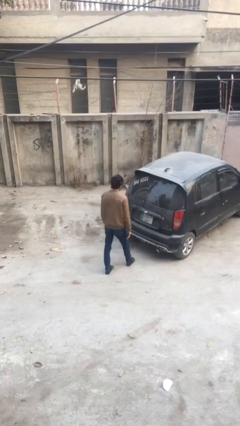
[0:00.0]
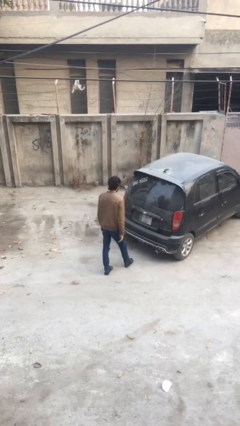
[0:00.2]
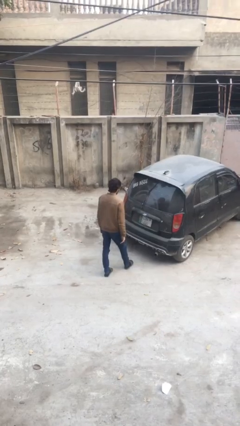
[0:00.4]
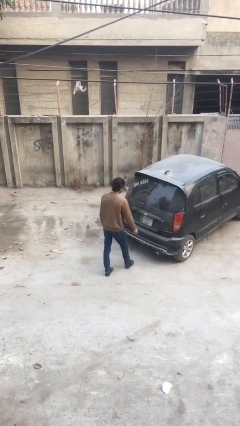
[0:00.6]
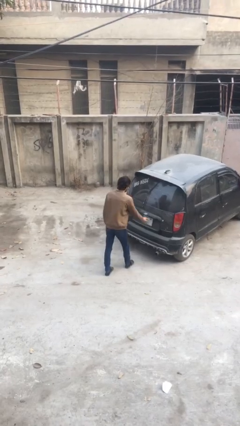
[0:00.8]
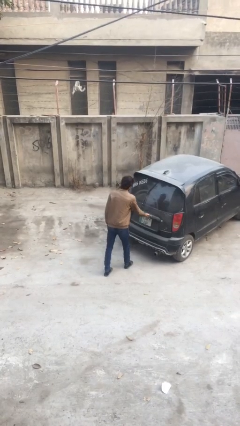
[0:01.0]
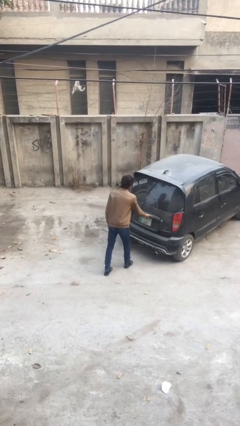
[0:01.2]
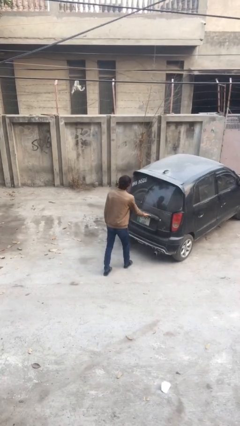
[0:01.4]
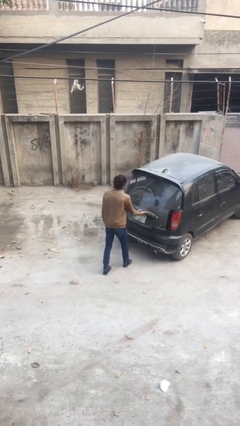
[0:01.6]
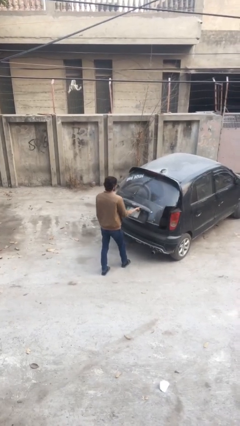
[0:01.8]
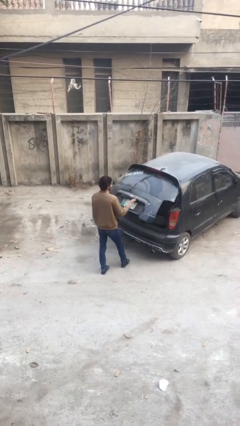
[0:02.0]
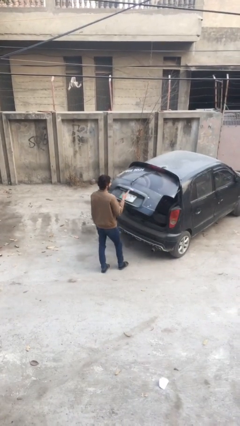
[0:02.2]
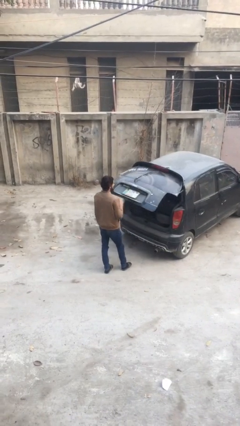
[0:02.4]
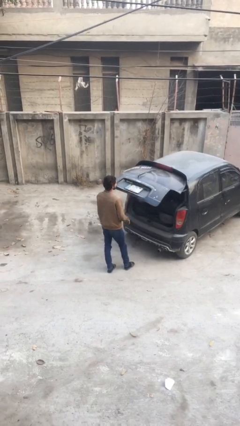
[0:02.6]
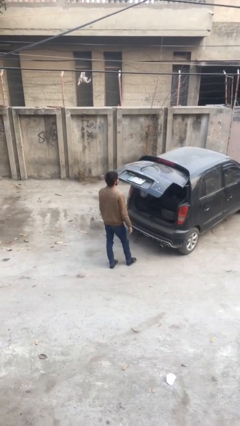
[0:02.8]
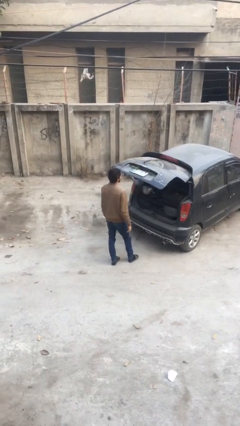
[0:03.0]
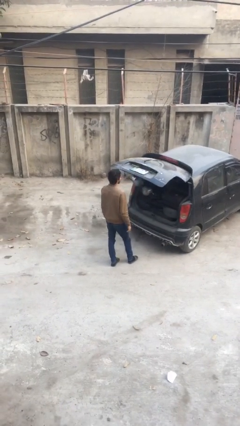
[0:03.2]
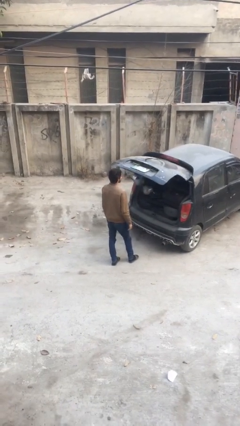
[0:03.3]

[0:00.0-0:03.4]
person opens car trunk

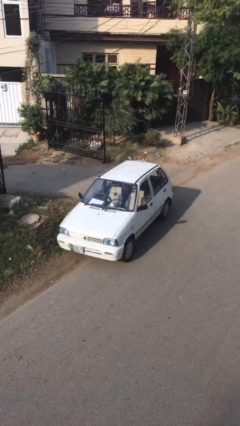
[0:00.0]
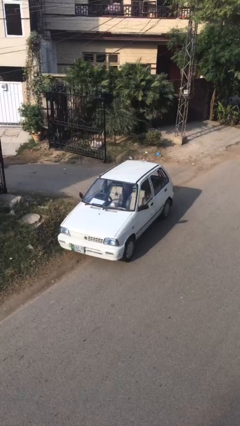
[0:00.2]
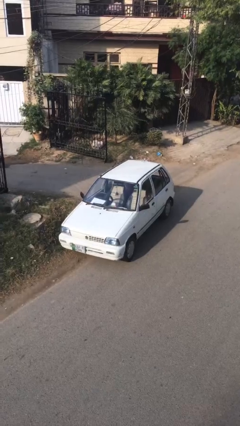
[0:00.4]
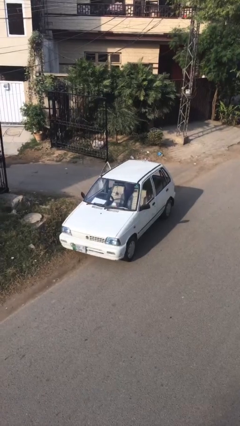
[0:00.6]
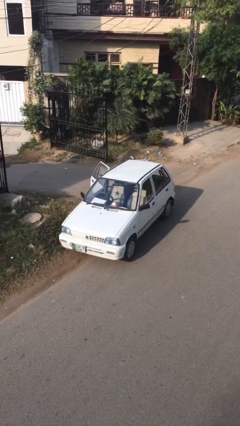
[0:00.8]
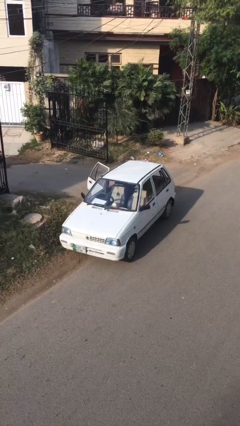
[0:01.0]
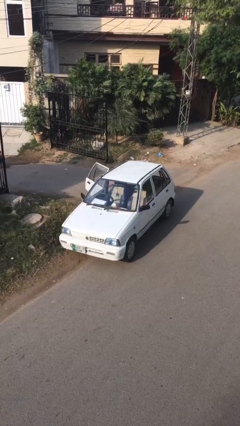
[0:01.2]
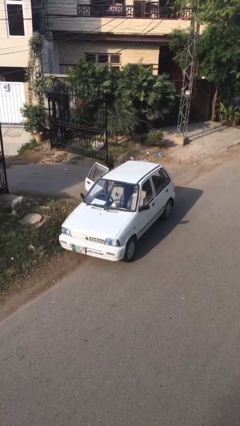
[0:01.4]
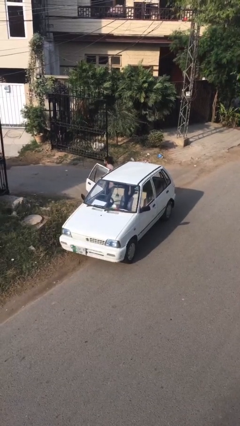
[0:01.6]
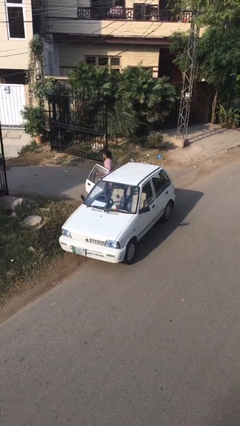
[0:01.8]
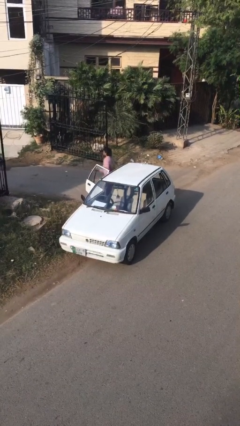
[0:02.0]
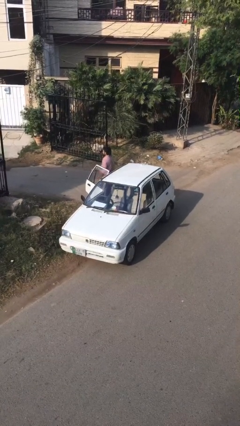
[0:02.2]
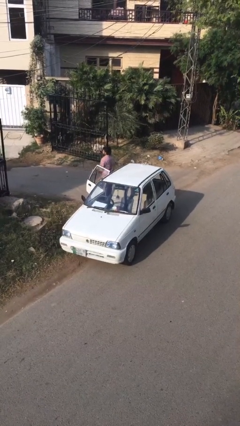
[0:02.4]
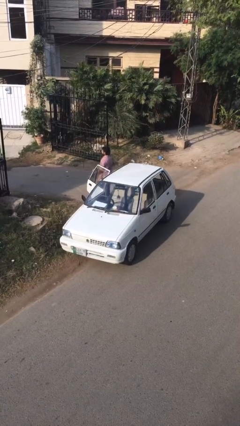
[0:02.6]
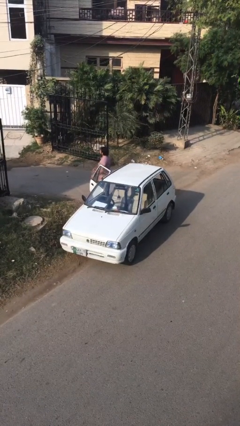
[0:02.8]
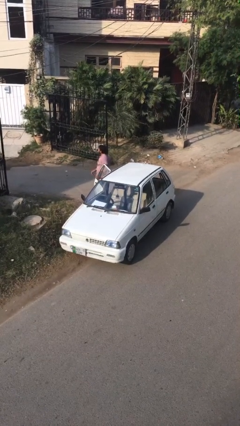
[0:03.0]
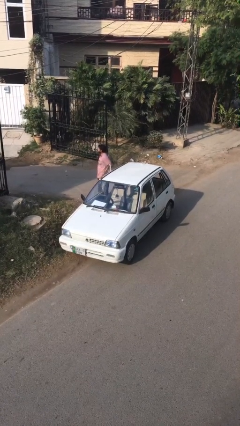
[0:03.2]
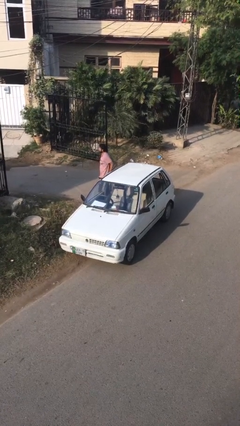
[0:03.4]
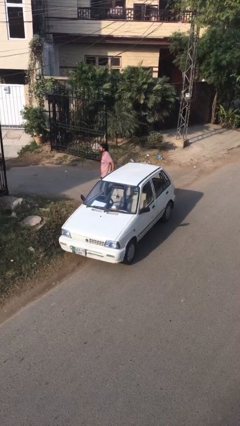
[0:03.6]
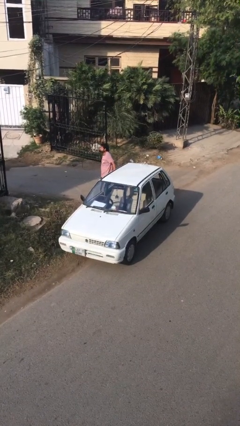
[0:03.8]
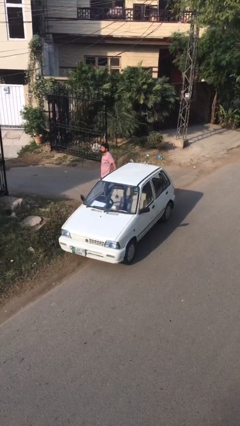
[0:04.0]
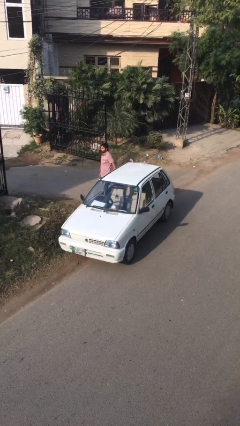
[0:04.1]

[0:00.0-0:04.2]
car drops off person

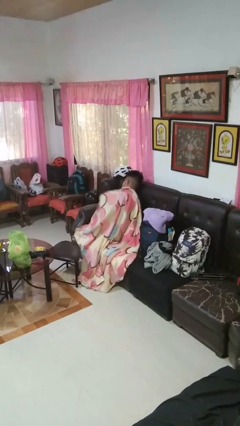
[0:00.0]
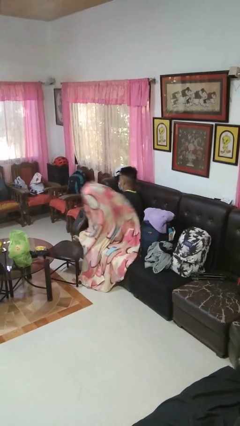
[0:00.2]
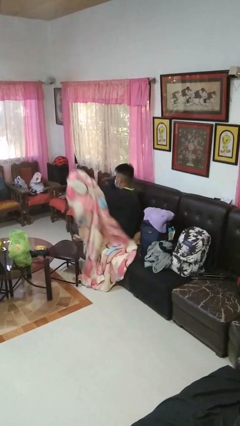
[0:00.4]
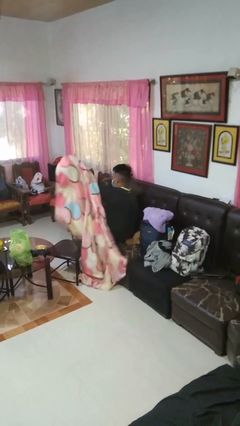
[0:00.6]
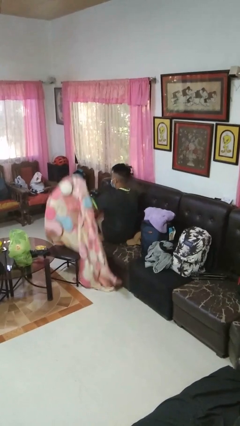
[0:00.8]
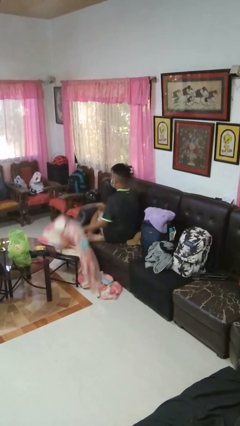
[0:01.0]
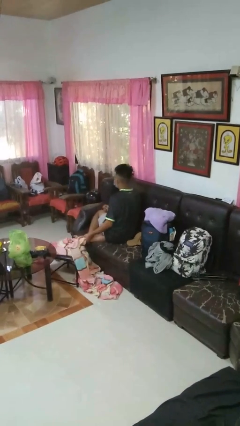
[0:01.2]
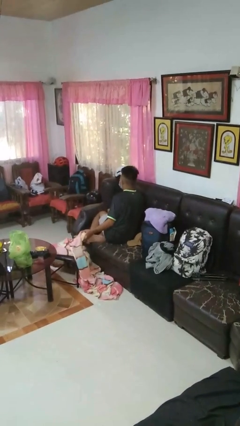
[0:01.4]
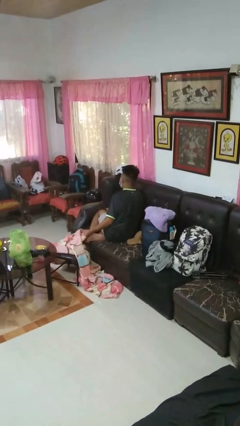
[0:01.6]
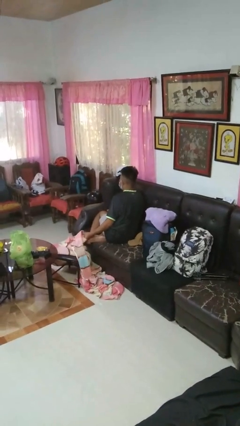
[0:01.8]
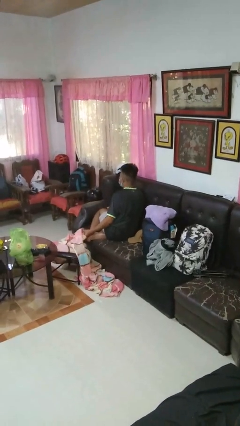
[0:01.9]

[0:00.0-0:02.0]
person uncovers with blanket

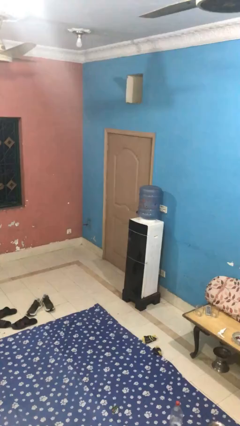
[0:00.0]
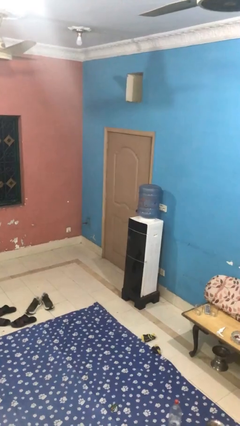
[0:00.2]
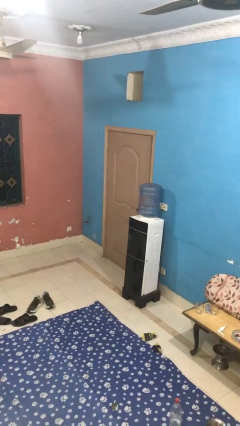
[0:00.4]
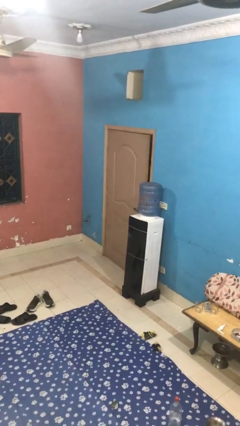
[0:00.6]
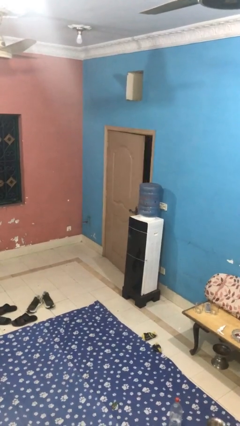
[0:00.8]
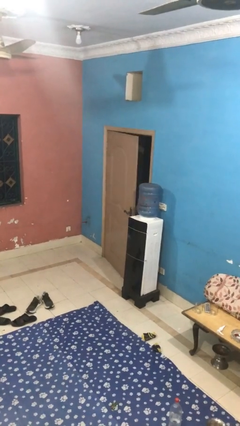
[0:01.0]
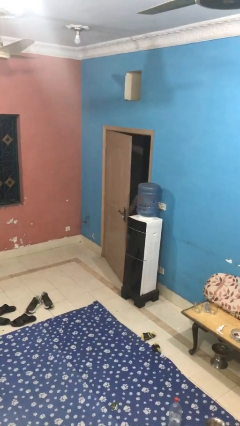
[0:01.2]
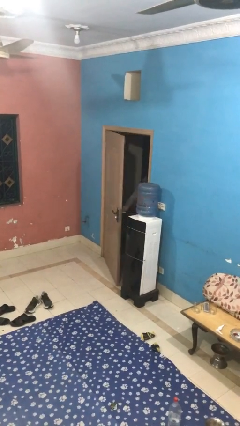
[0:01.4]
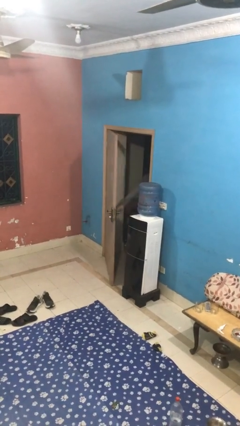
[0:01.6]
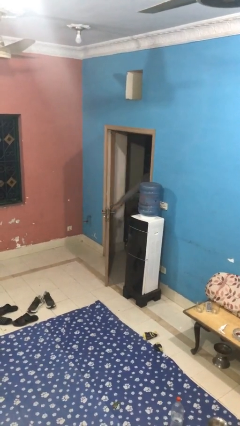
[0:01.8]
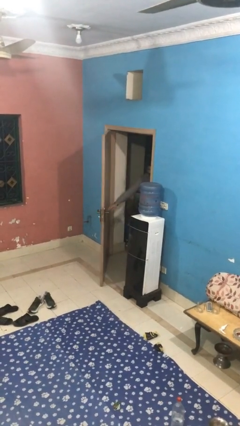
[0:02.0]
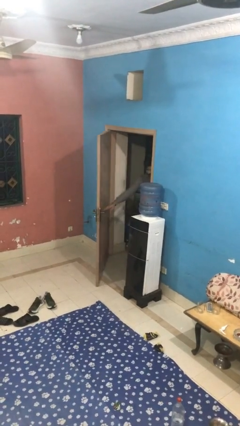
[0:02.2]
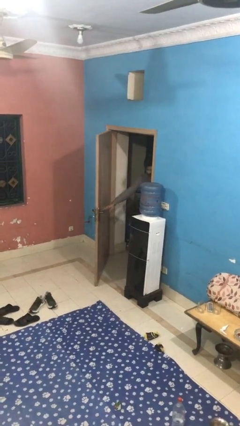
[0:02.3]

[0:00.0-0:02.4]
person opens facility door

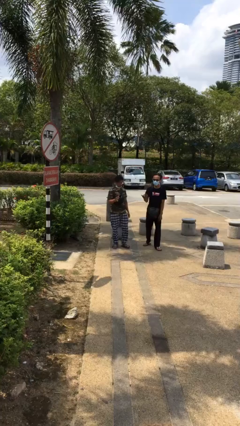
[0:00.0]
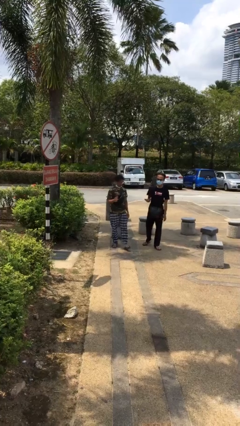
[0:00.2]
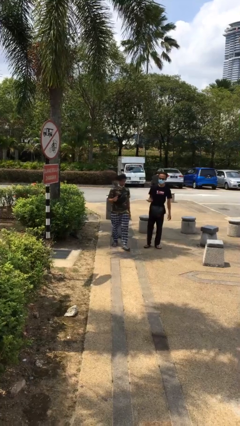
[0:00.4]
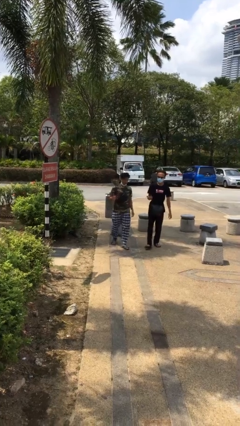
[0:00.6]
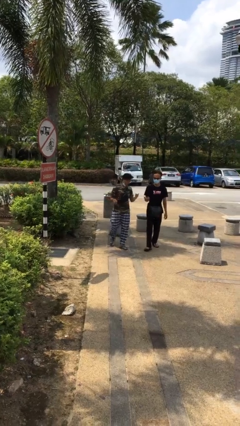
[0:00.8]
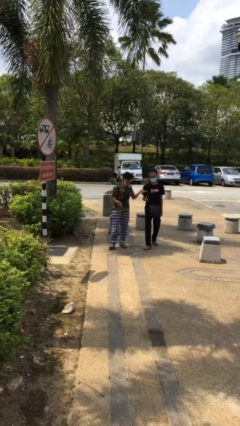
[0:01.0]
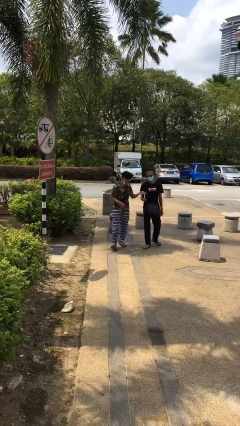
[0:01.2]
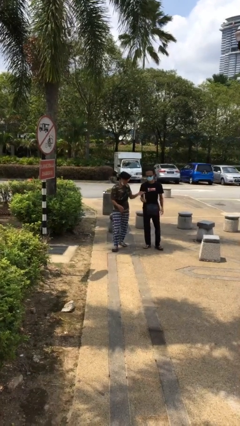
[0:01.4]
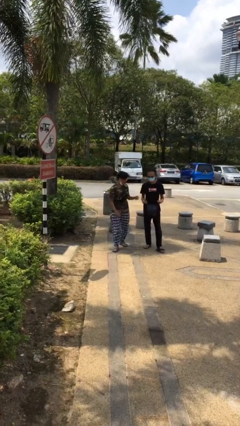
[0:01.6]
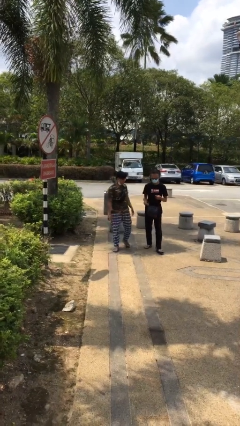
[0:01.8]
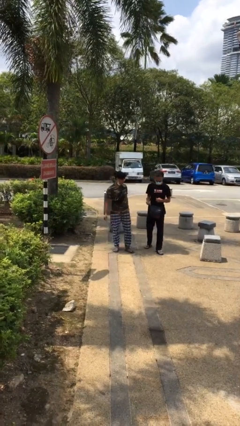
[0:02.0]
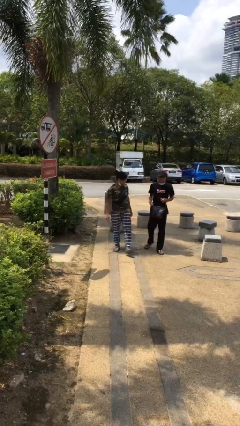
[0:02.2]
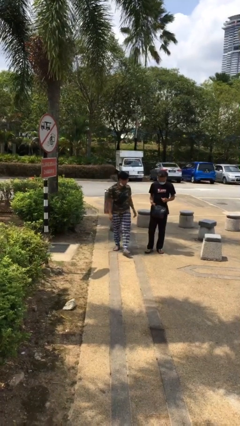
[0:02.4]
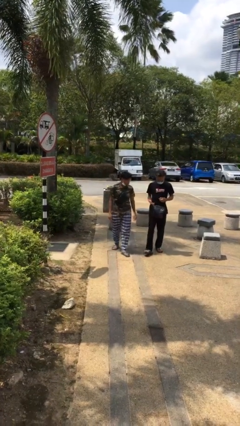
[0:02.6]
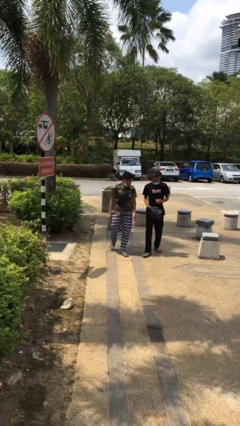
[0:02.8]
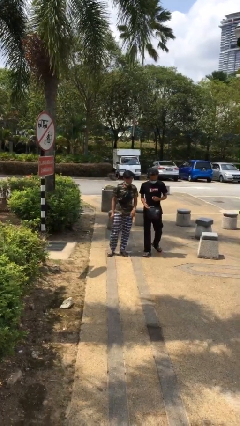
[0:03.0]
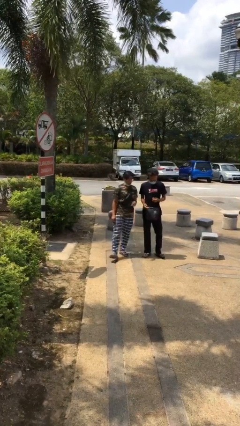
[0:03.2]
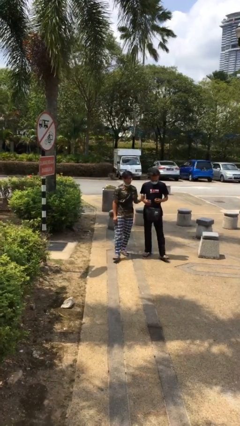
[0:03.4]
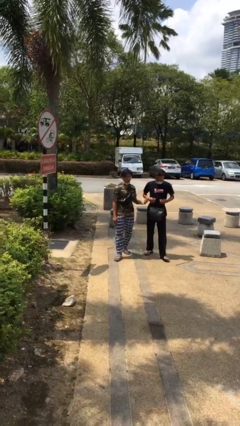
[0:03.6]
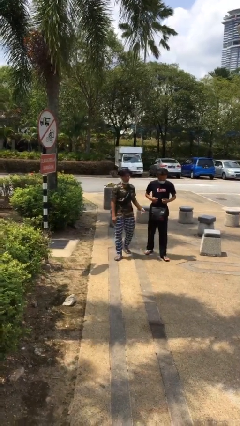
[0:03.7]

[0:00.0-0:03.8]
person talks to person

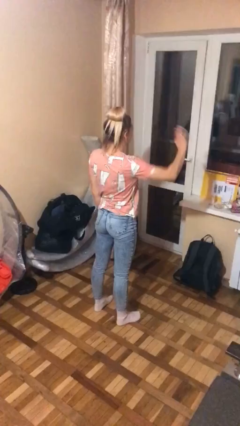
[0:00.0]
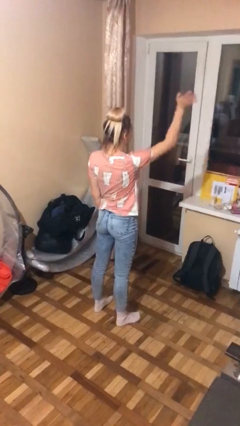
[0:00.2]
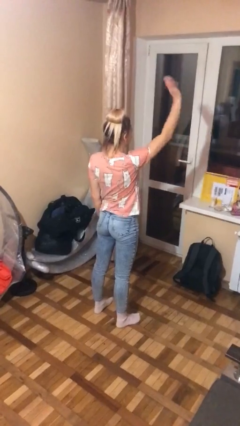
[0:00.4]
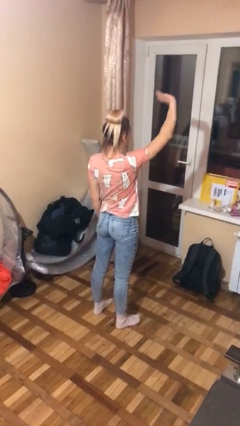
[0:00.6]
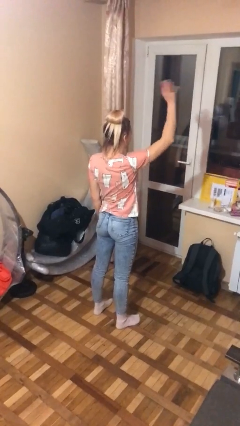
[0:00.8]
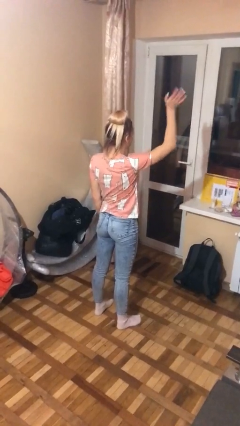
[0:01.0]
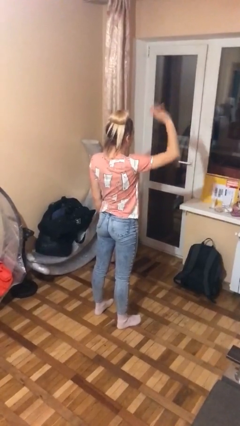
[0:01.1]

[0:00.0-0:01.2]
person salutes
